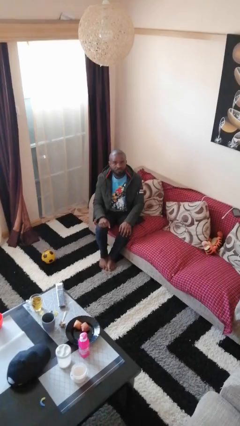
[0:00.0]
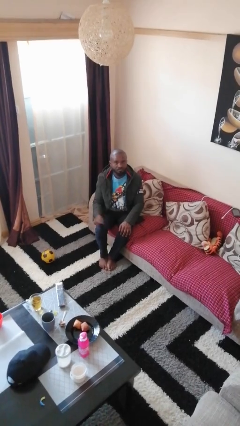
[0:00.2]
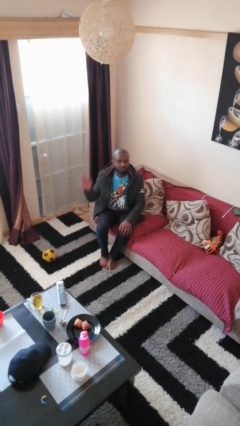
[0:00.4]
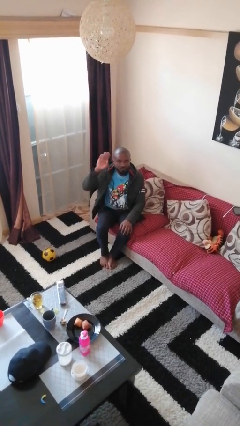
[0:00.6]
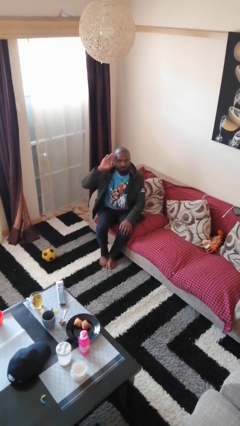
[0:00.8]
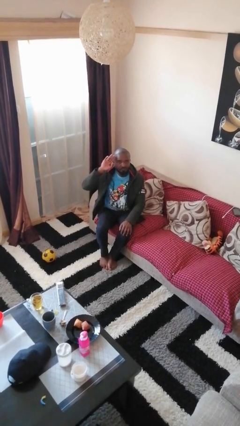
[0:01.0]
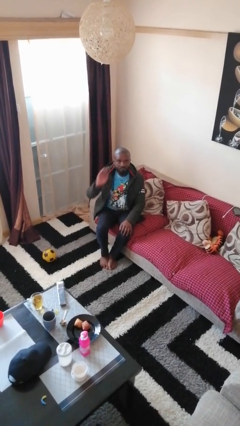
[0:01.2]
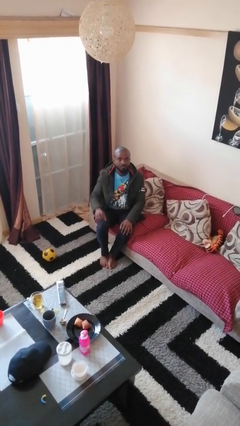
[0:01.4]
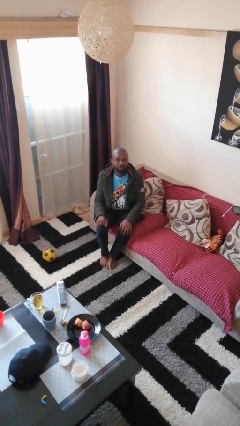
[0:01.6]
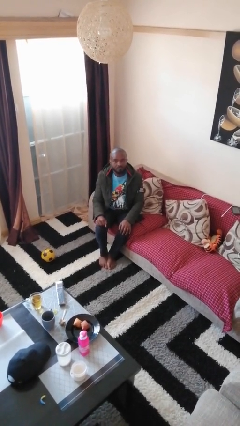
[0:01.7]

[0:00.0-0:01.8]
person salutes

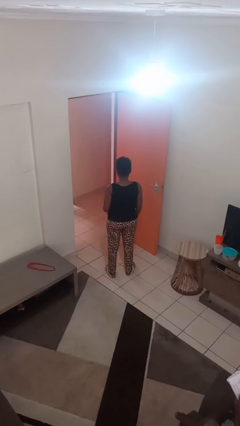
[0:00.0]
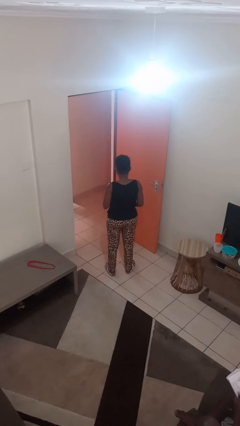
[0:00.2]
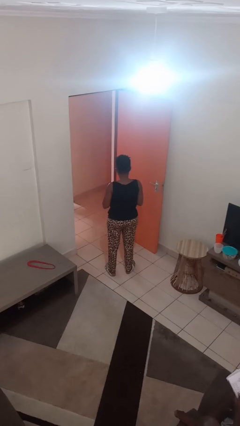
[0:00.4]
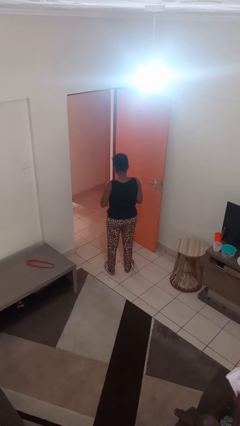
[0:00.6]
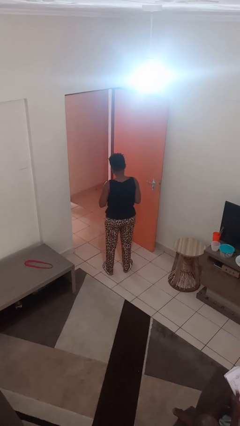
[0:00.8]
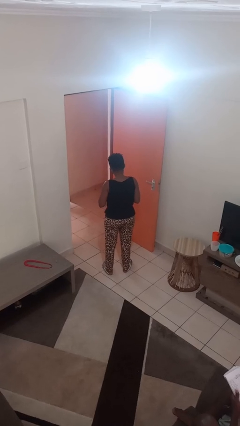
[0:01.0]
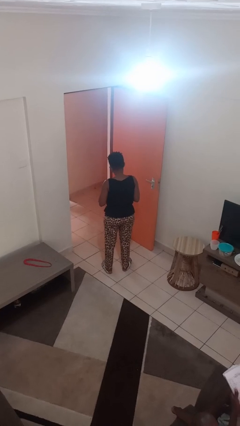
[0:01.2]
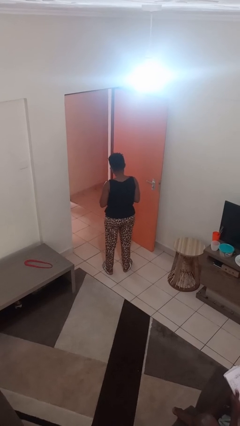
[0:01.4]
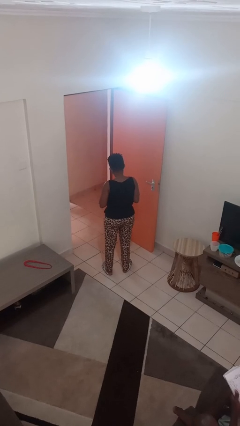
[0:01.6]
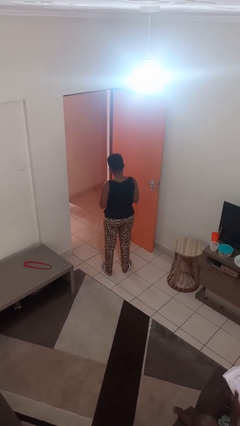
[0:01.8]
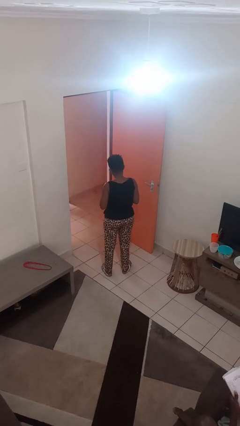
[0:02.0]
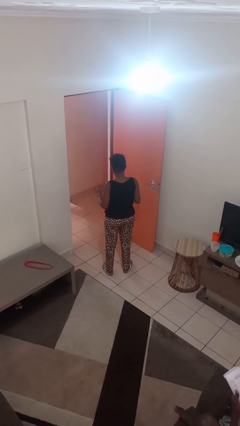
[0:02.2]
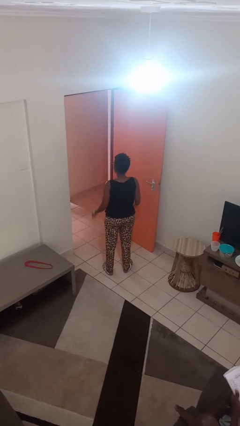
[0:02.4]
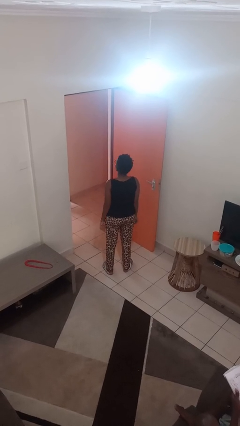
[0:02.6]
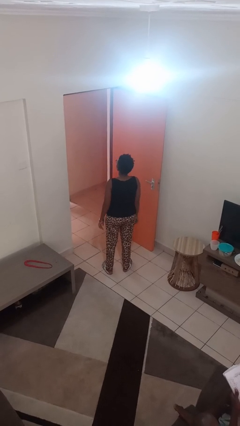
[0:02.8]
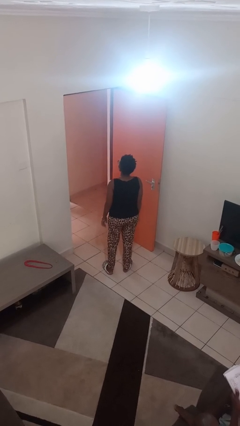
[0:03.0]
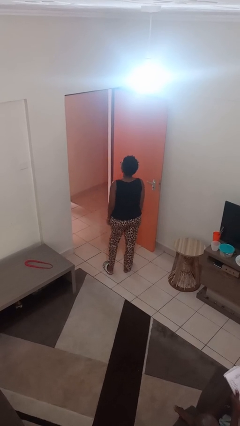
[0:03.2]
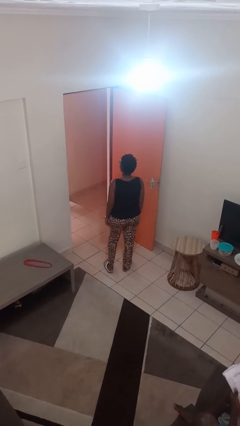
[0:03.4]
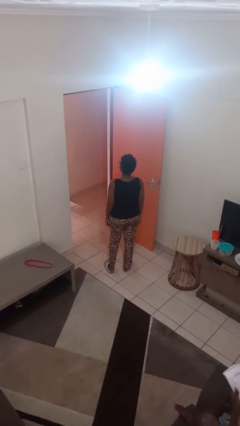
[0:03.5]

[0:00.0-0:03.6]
person takes off ring

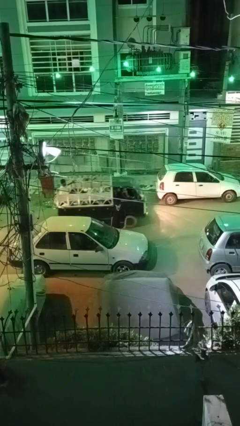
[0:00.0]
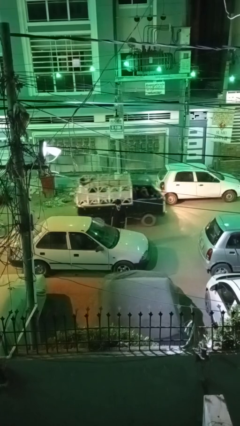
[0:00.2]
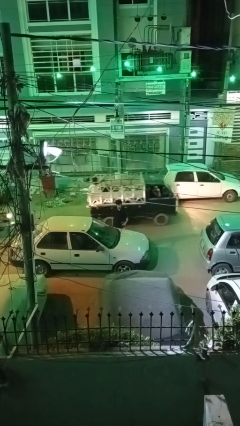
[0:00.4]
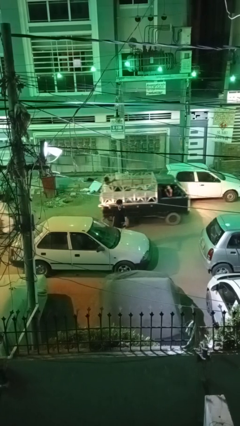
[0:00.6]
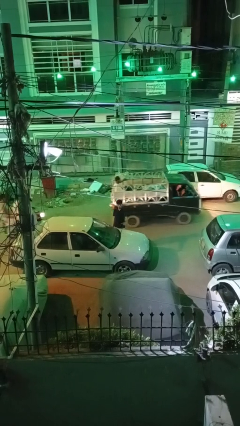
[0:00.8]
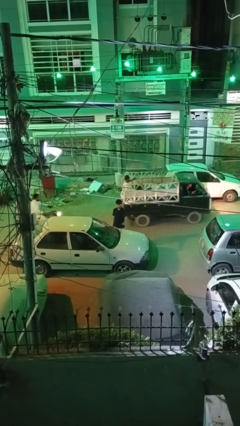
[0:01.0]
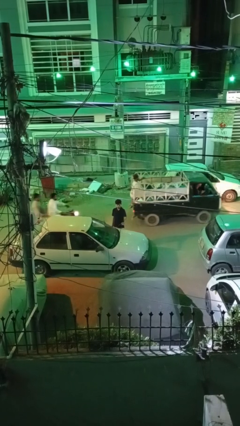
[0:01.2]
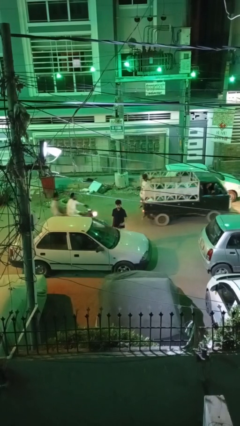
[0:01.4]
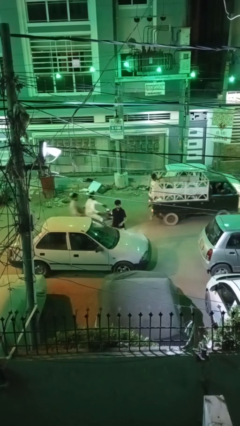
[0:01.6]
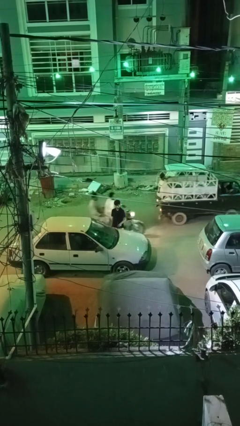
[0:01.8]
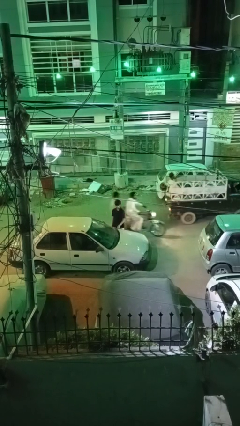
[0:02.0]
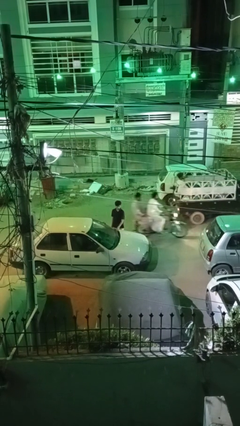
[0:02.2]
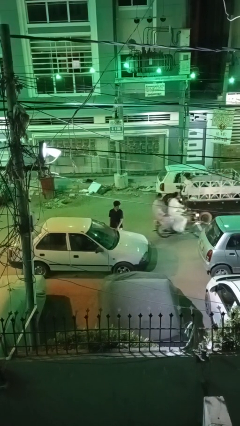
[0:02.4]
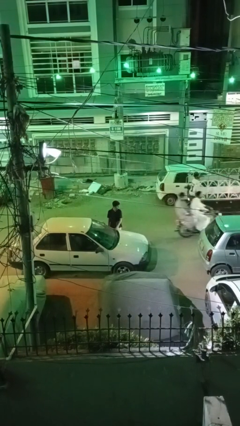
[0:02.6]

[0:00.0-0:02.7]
person flips down car wipers

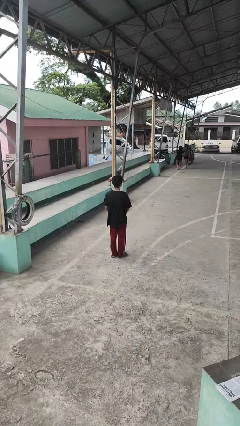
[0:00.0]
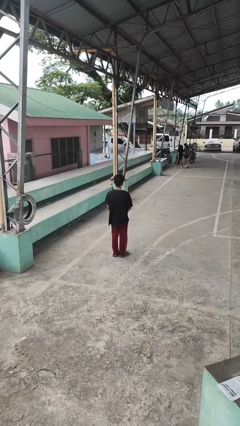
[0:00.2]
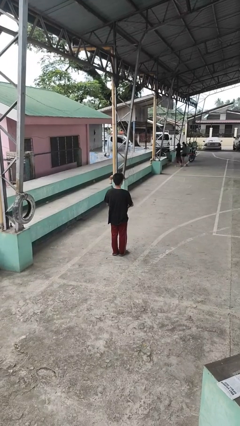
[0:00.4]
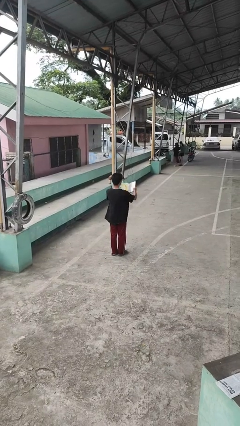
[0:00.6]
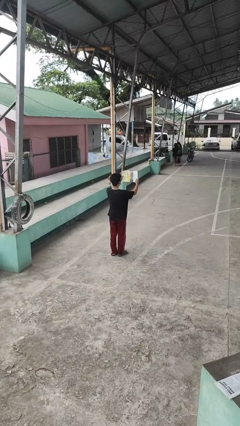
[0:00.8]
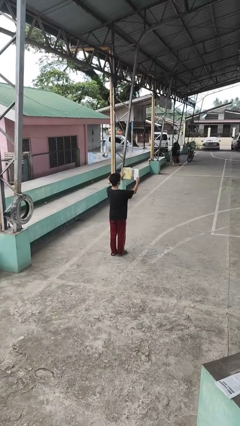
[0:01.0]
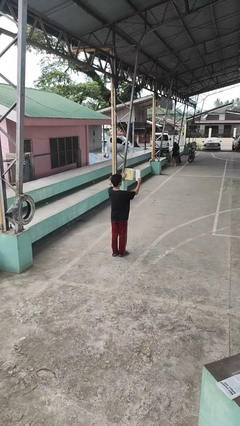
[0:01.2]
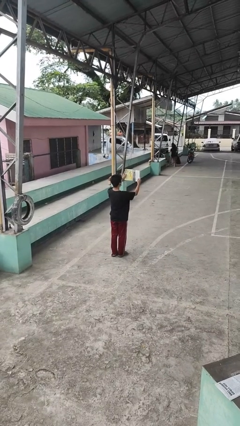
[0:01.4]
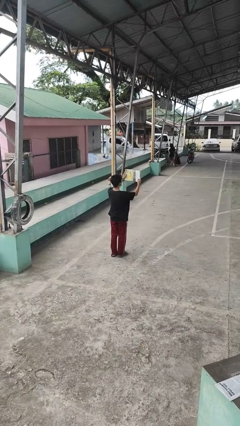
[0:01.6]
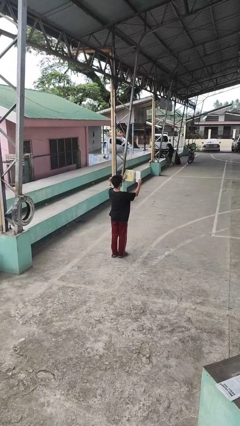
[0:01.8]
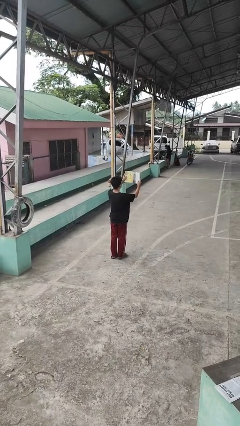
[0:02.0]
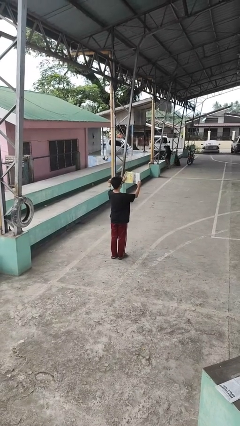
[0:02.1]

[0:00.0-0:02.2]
person reads book

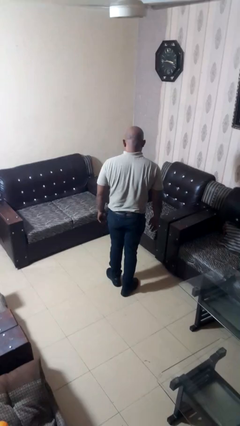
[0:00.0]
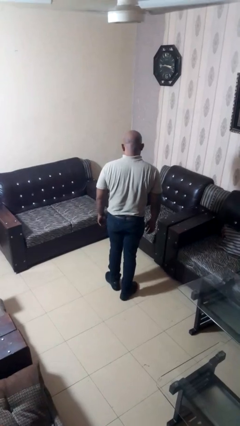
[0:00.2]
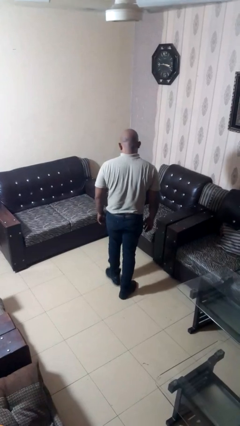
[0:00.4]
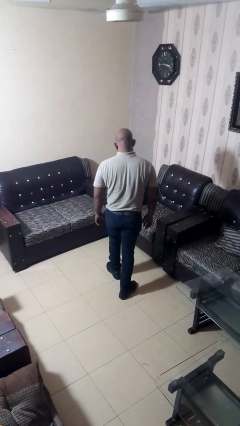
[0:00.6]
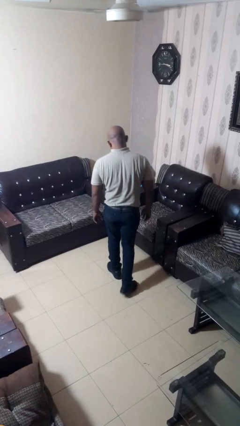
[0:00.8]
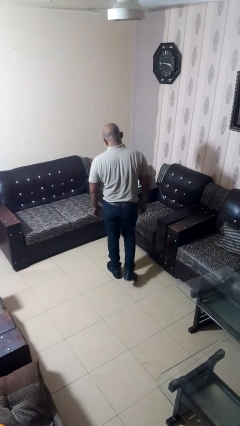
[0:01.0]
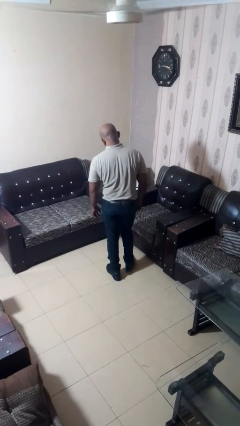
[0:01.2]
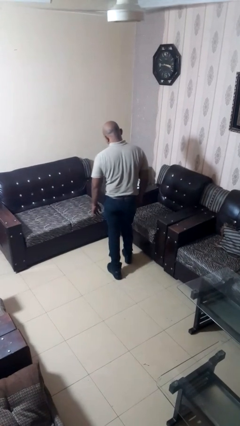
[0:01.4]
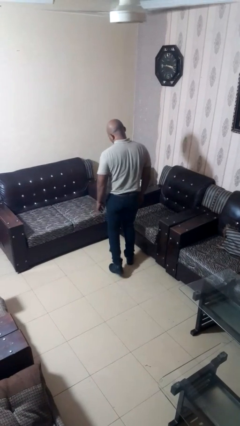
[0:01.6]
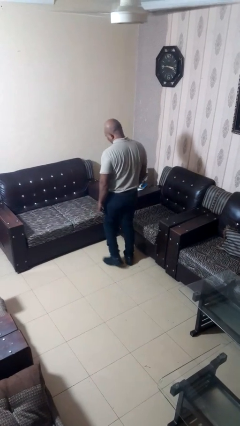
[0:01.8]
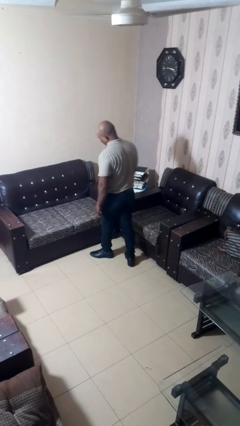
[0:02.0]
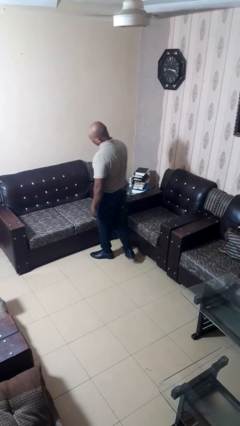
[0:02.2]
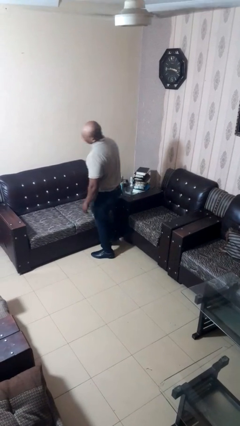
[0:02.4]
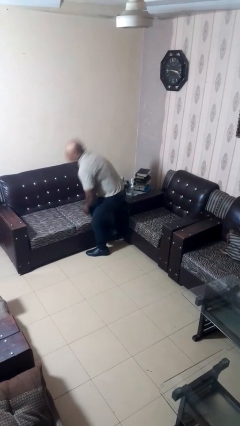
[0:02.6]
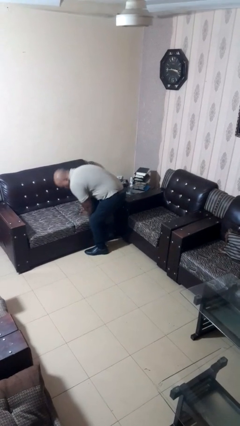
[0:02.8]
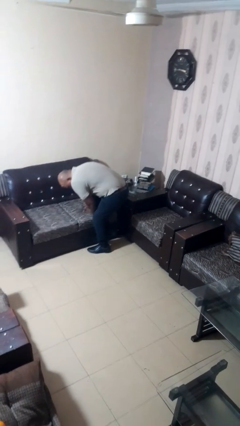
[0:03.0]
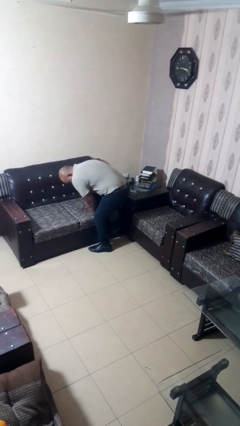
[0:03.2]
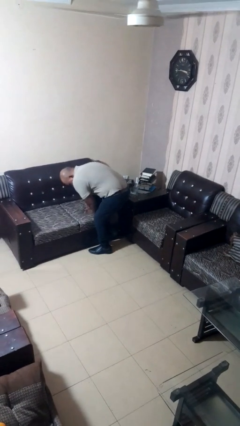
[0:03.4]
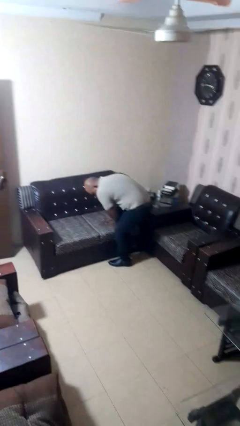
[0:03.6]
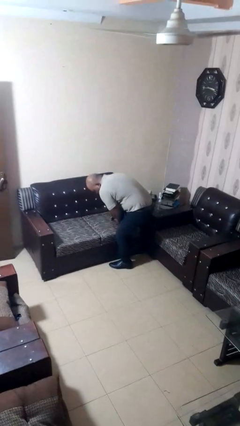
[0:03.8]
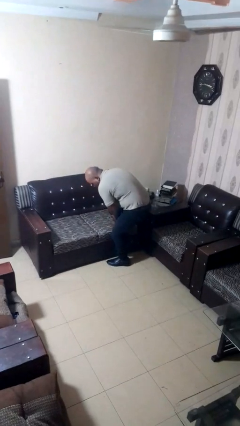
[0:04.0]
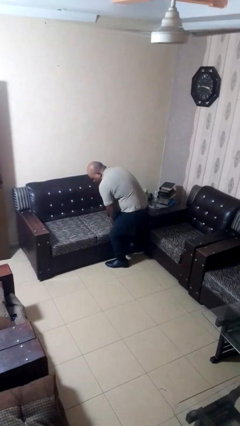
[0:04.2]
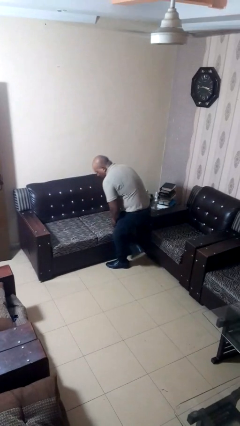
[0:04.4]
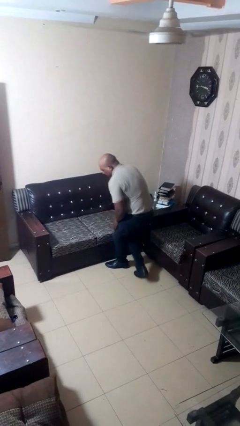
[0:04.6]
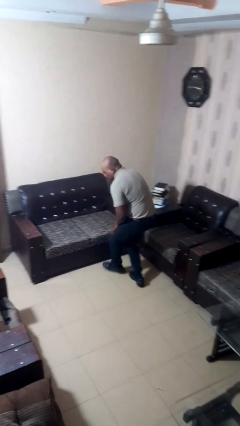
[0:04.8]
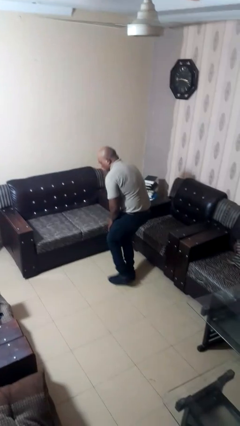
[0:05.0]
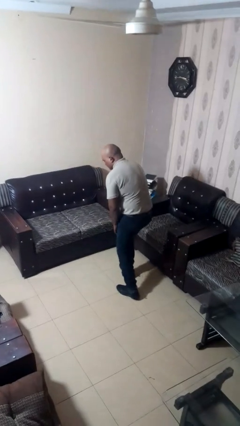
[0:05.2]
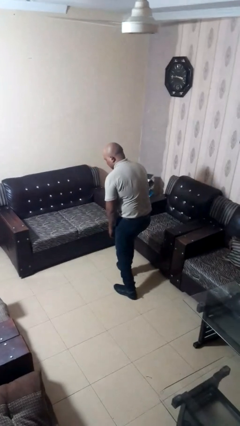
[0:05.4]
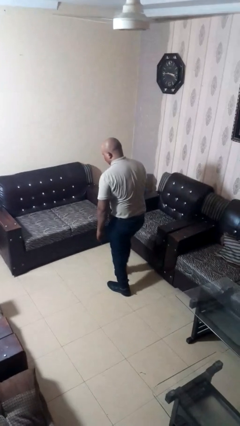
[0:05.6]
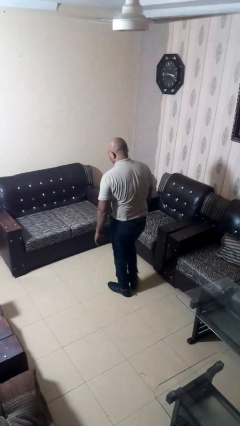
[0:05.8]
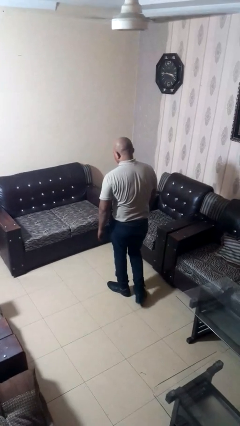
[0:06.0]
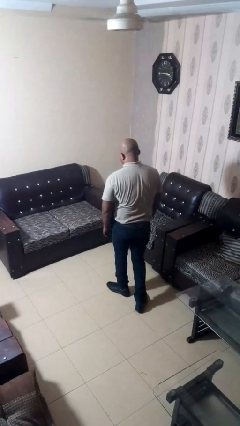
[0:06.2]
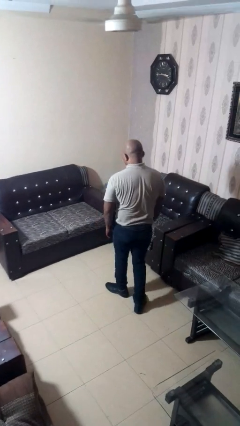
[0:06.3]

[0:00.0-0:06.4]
person stubs toe

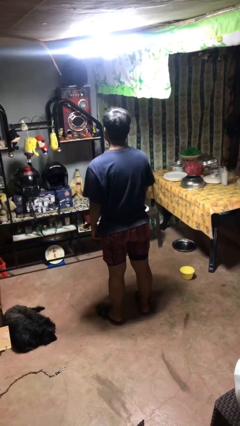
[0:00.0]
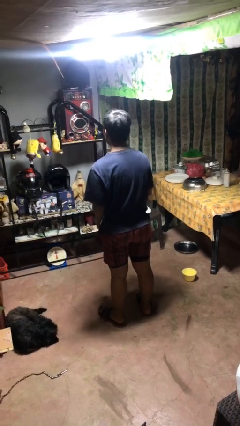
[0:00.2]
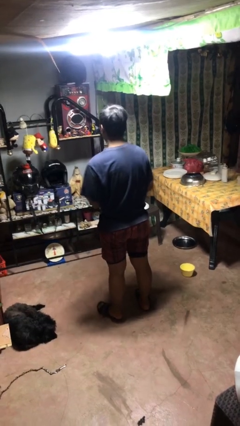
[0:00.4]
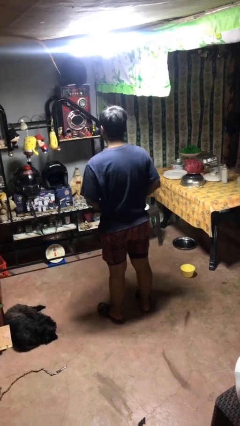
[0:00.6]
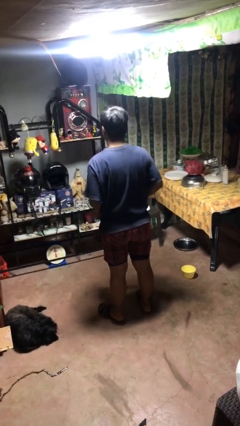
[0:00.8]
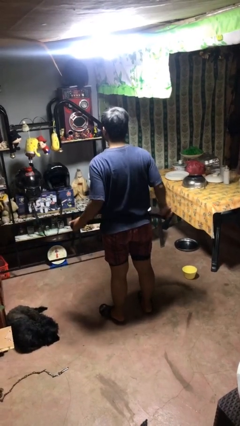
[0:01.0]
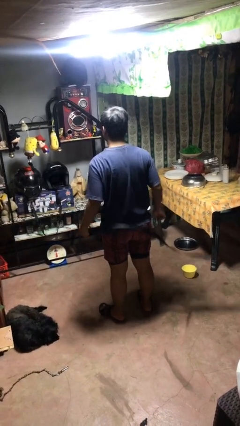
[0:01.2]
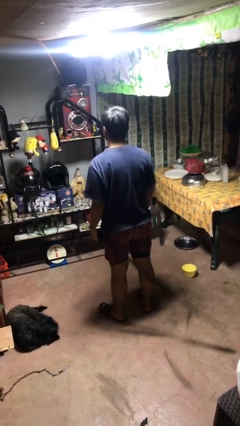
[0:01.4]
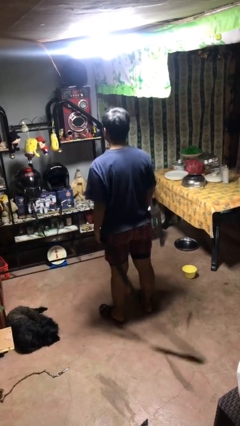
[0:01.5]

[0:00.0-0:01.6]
person takes off belt
